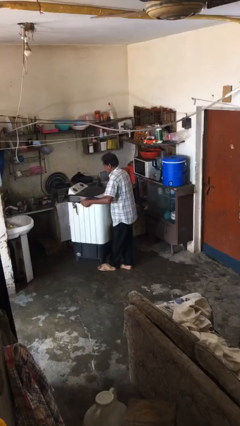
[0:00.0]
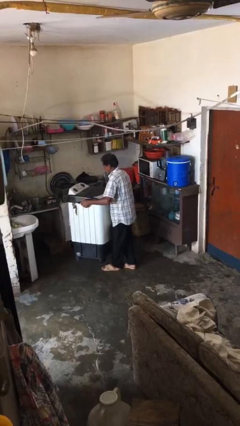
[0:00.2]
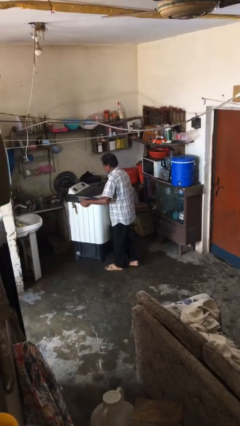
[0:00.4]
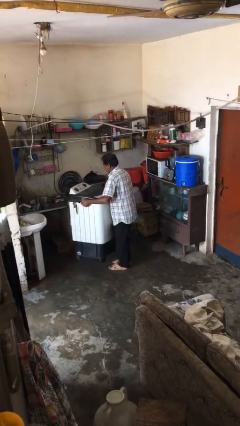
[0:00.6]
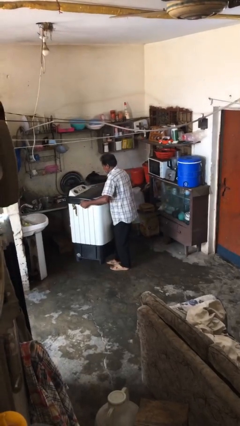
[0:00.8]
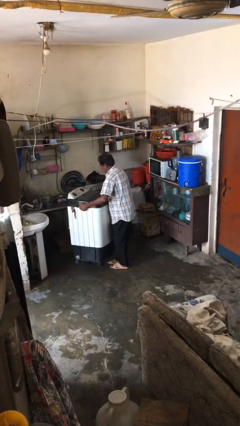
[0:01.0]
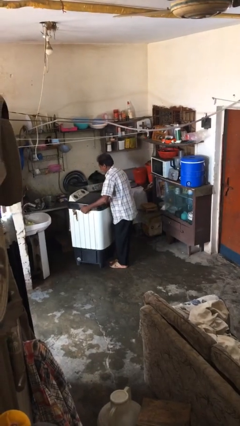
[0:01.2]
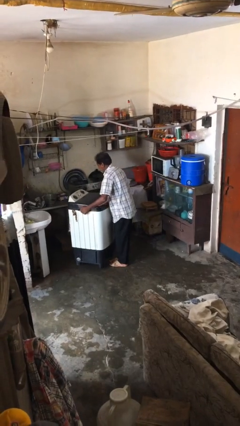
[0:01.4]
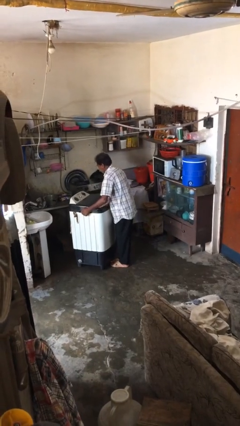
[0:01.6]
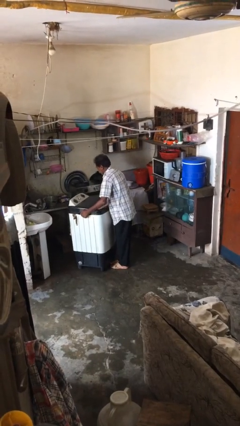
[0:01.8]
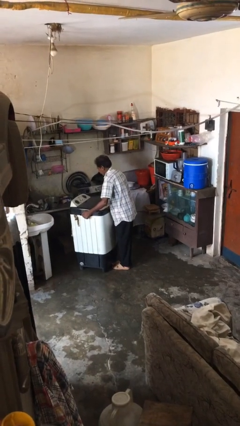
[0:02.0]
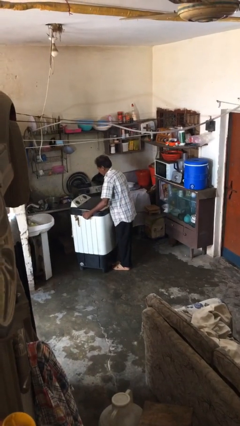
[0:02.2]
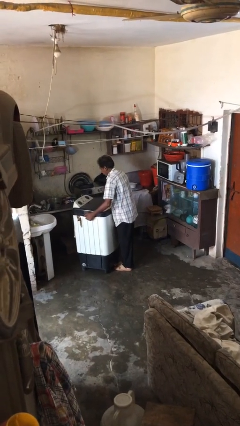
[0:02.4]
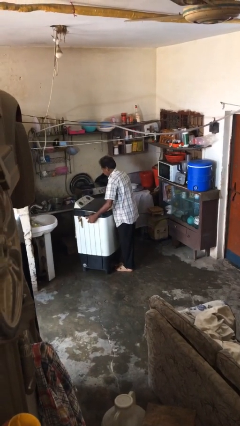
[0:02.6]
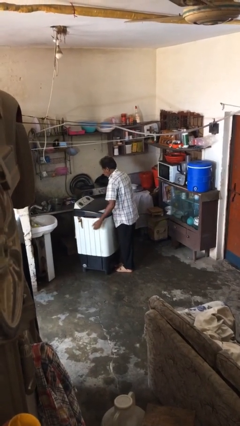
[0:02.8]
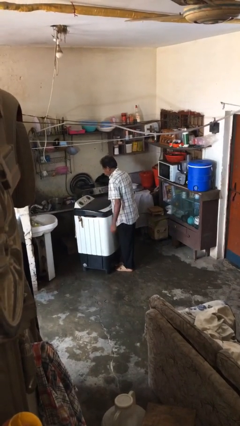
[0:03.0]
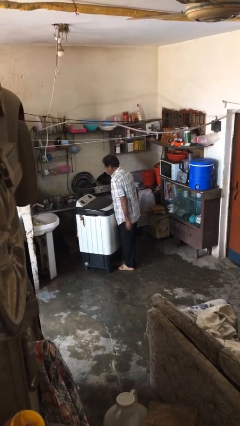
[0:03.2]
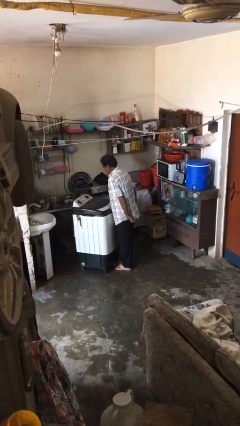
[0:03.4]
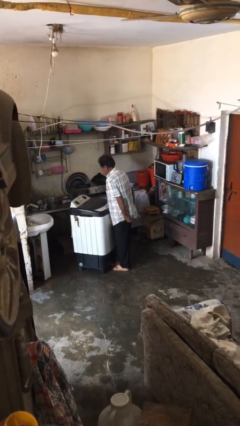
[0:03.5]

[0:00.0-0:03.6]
person puts down object on floor

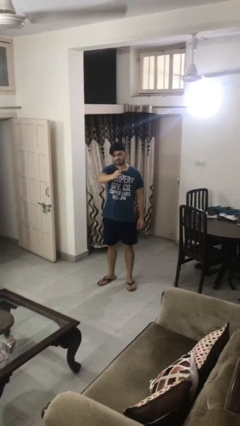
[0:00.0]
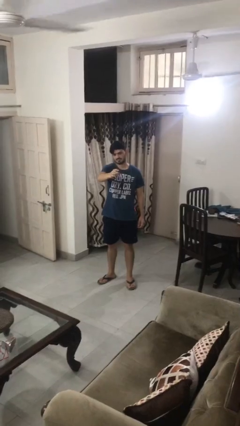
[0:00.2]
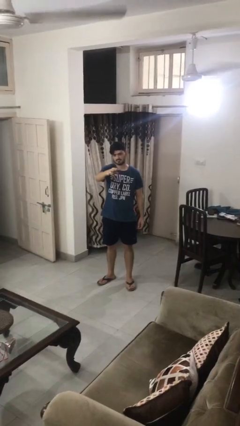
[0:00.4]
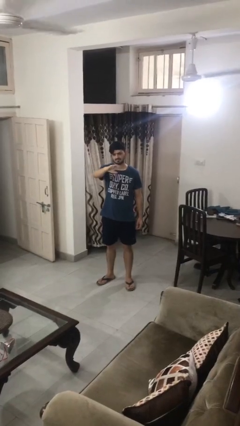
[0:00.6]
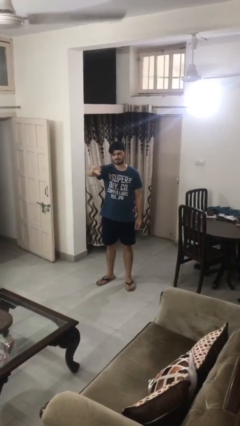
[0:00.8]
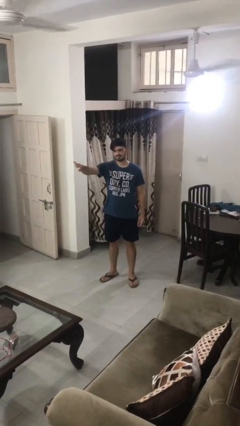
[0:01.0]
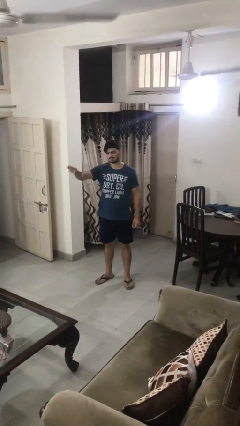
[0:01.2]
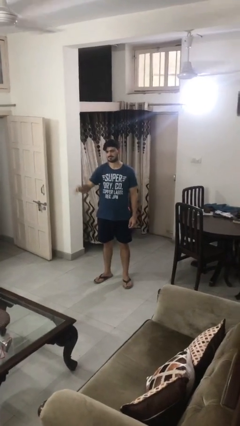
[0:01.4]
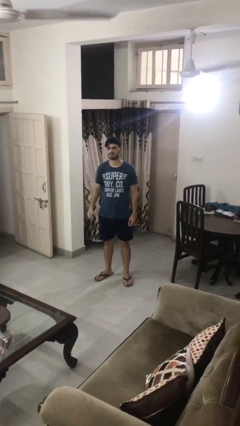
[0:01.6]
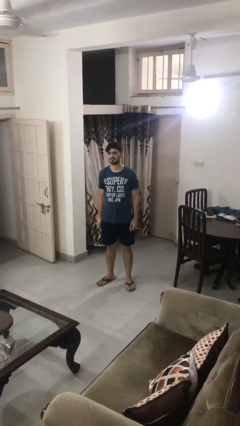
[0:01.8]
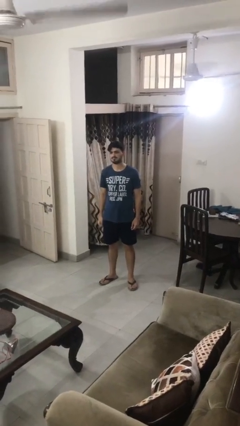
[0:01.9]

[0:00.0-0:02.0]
person gestures swipe right

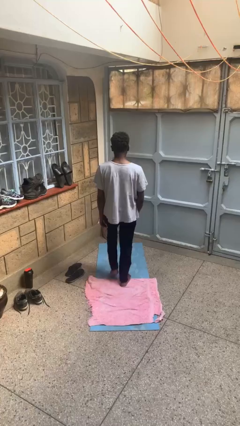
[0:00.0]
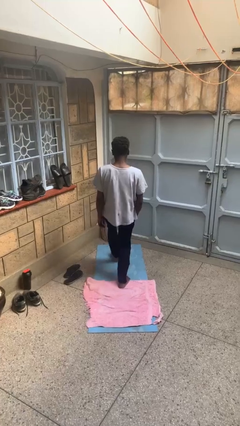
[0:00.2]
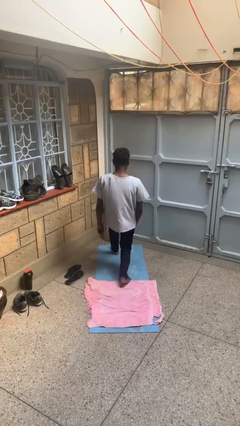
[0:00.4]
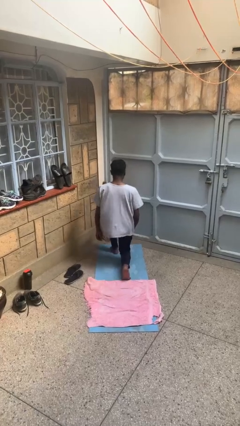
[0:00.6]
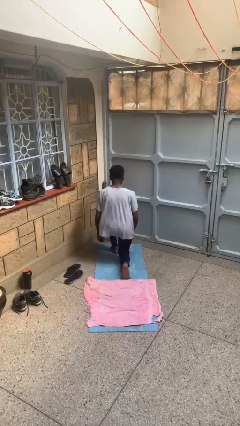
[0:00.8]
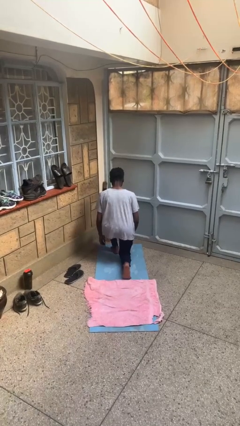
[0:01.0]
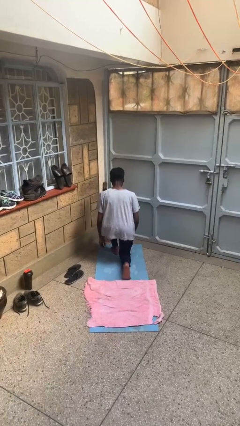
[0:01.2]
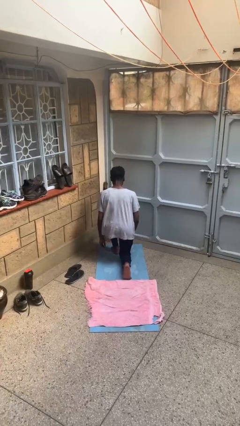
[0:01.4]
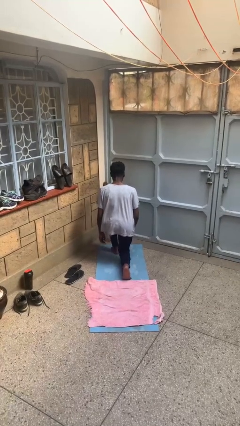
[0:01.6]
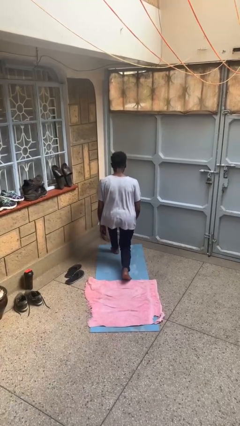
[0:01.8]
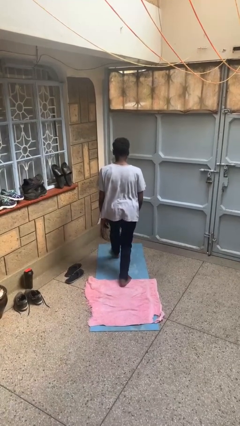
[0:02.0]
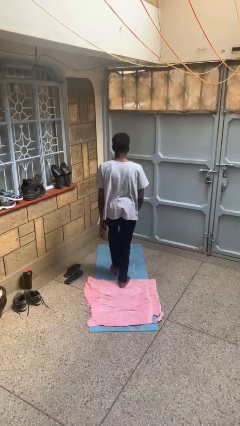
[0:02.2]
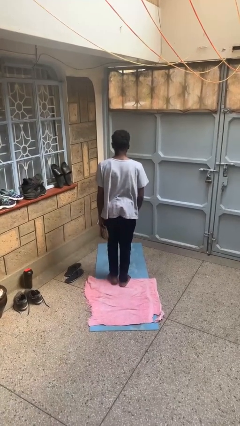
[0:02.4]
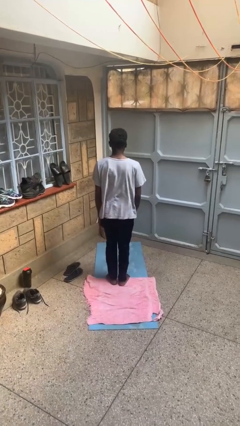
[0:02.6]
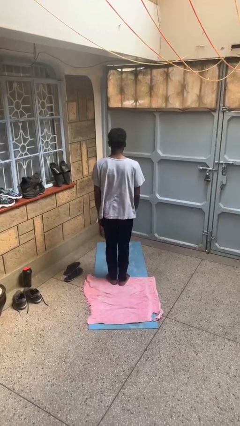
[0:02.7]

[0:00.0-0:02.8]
person exercises with lunges

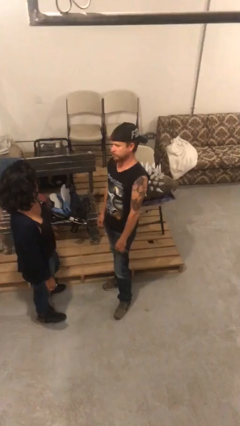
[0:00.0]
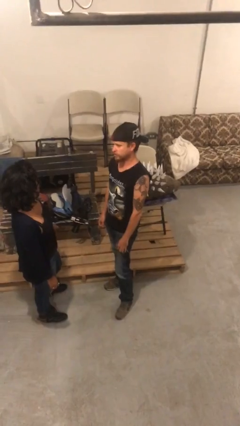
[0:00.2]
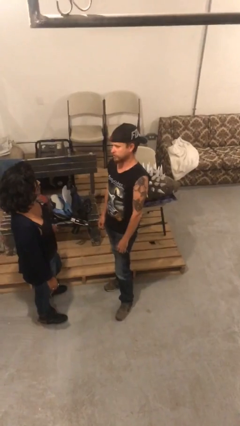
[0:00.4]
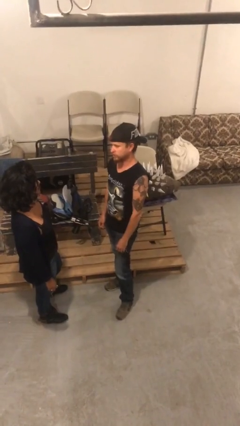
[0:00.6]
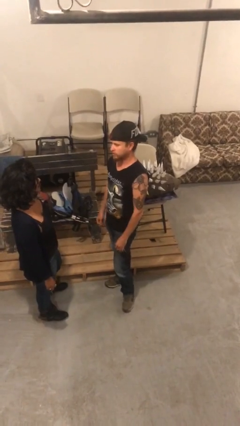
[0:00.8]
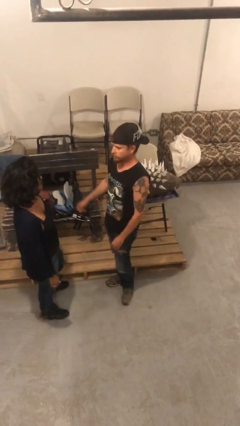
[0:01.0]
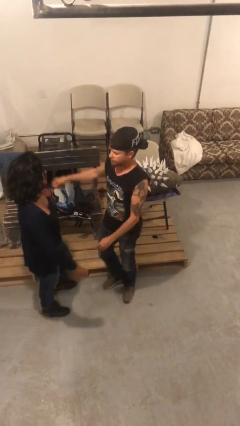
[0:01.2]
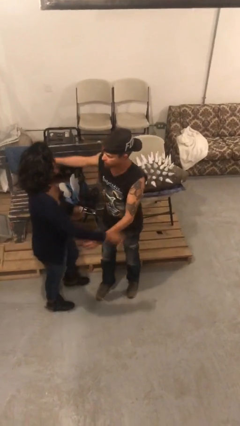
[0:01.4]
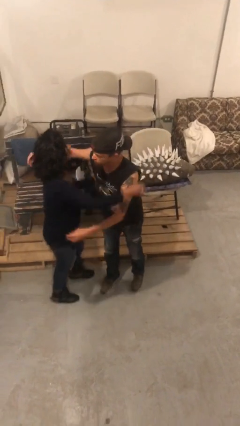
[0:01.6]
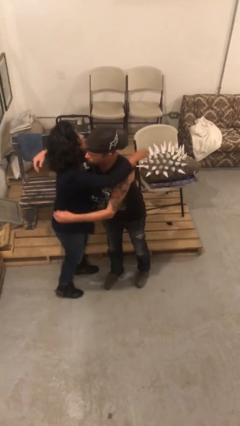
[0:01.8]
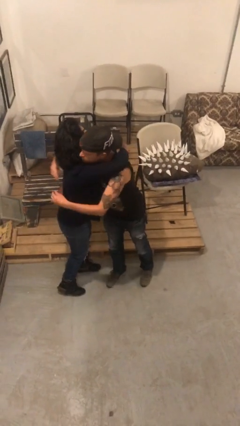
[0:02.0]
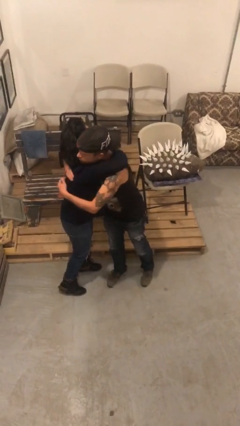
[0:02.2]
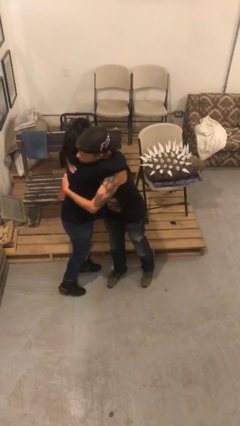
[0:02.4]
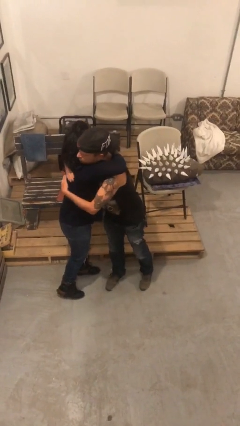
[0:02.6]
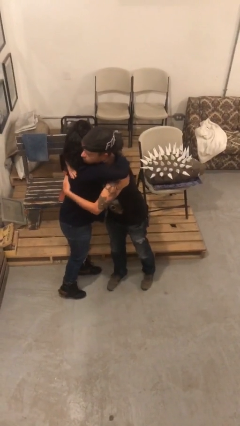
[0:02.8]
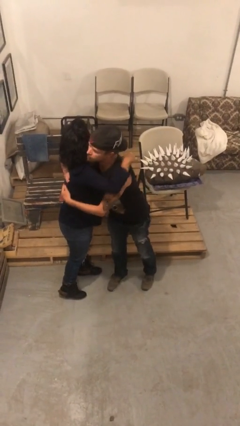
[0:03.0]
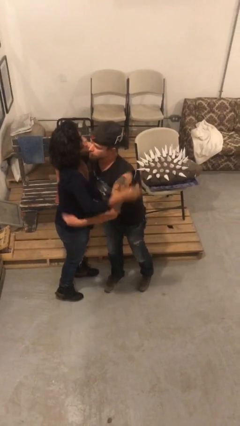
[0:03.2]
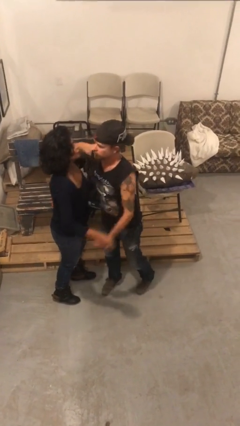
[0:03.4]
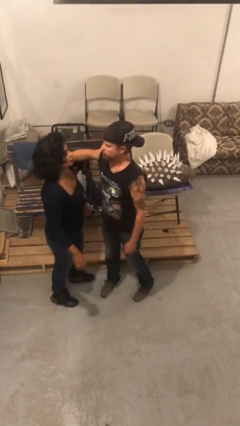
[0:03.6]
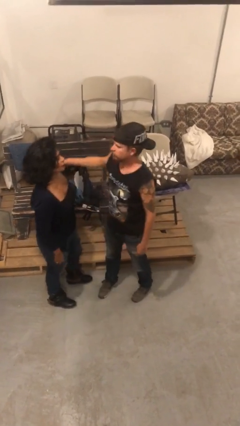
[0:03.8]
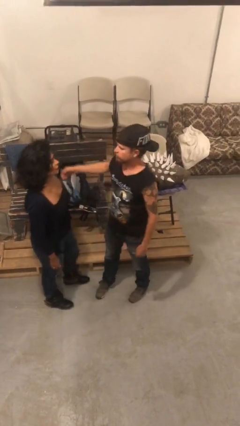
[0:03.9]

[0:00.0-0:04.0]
person embraces person

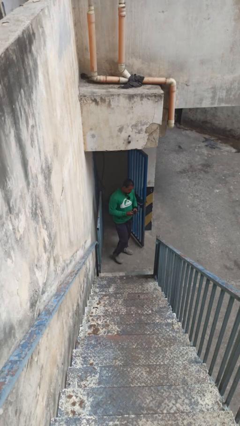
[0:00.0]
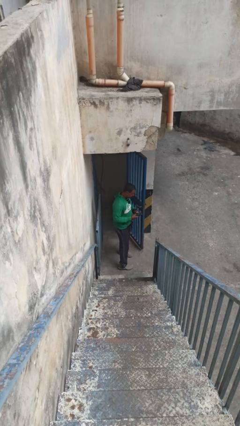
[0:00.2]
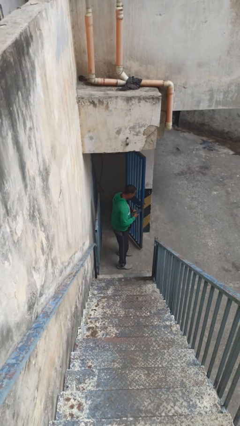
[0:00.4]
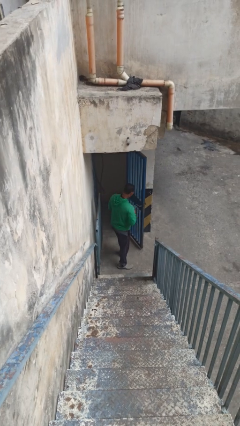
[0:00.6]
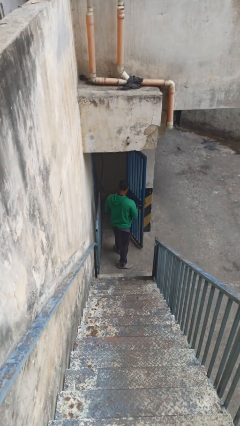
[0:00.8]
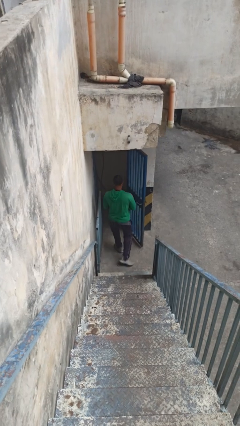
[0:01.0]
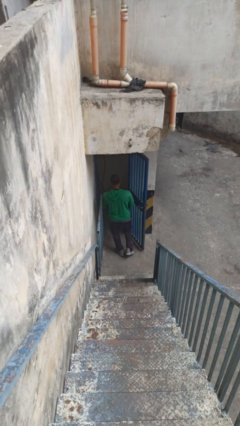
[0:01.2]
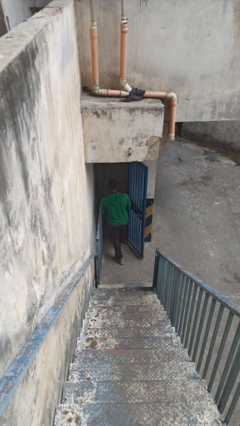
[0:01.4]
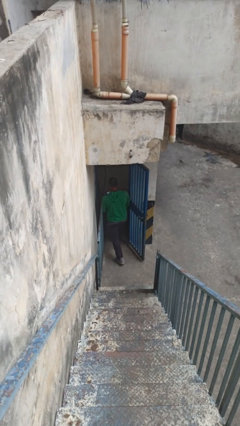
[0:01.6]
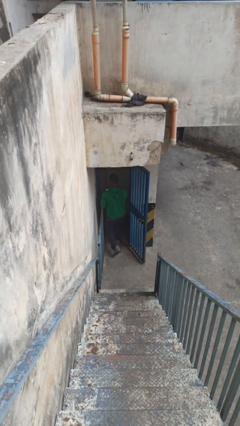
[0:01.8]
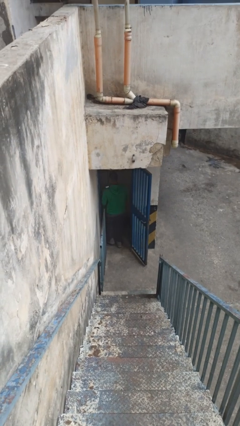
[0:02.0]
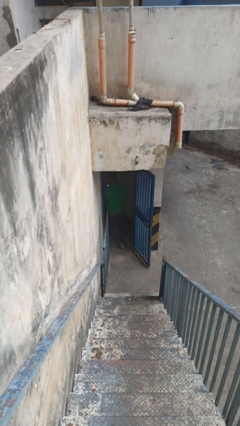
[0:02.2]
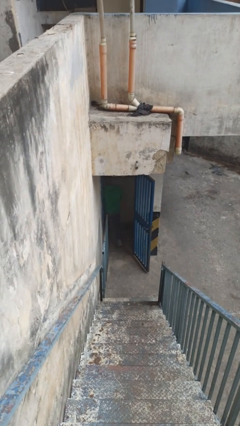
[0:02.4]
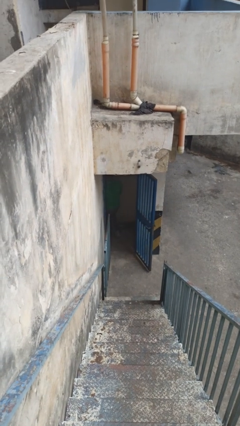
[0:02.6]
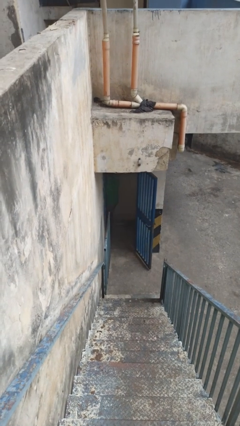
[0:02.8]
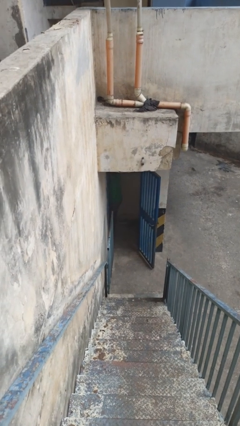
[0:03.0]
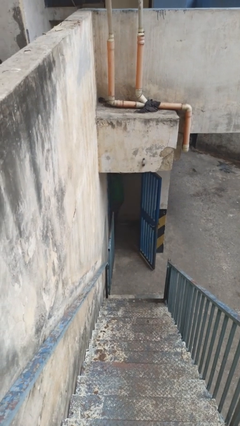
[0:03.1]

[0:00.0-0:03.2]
person exits scene through structure

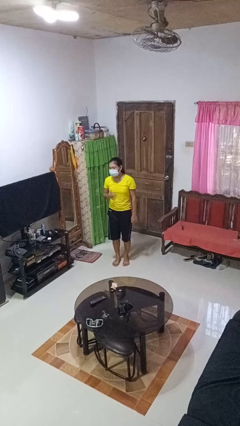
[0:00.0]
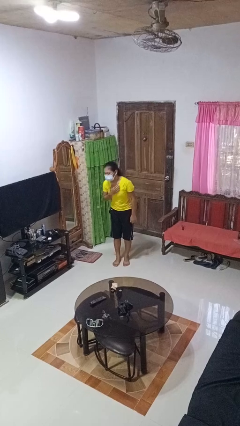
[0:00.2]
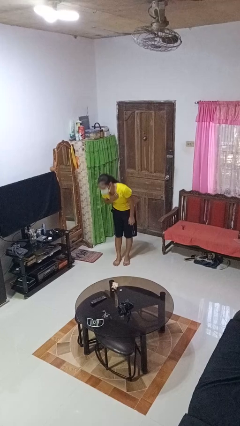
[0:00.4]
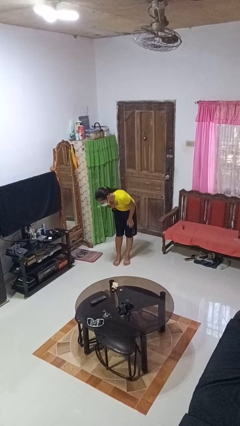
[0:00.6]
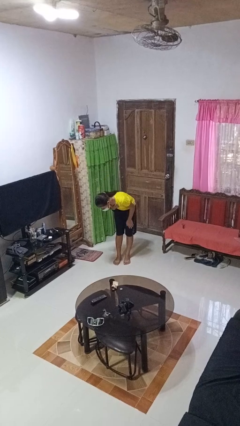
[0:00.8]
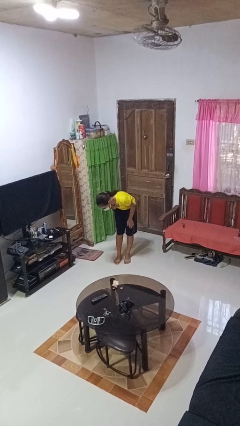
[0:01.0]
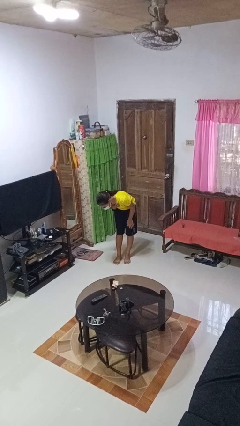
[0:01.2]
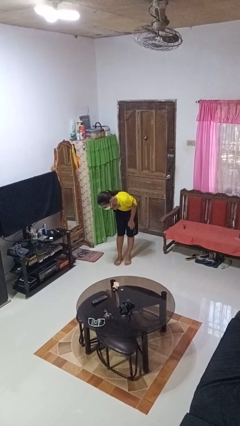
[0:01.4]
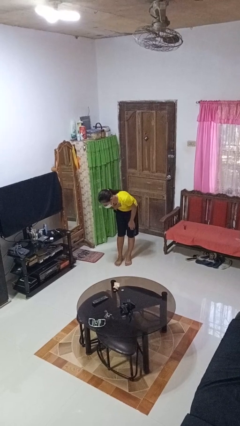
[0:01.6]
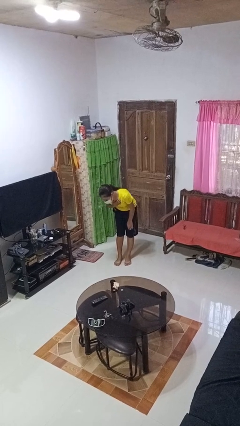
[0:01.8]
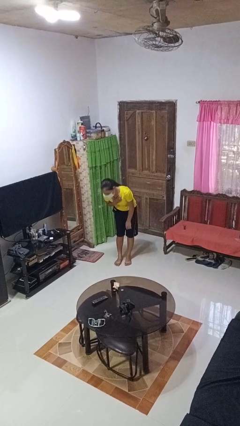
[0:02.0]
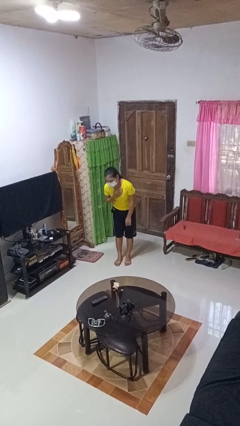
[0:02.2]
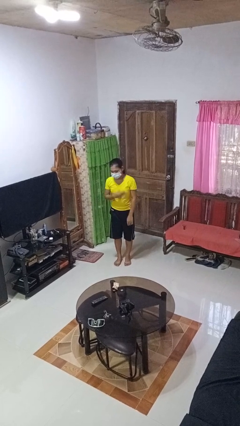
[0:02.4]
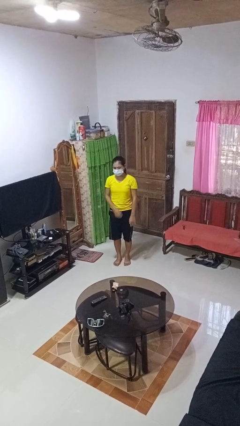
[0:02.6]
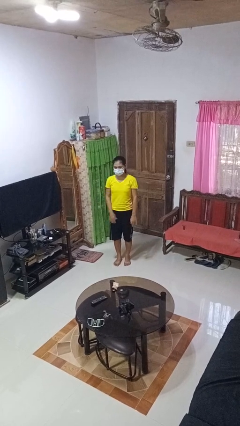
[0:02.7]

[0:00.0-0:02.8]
person bows
